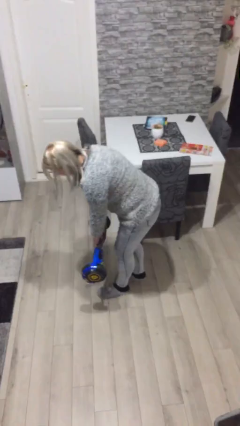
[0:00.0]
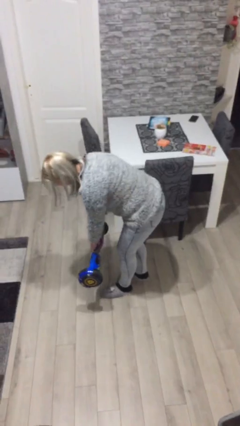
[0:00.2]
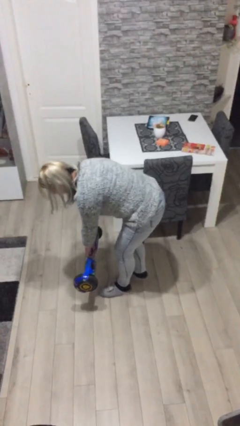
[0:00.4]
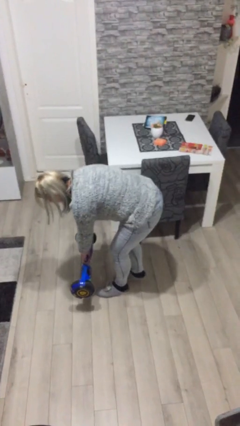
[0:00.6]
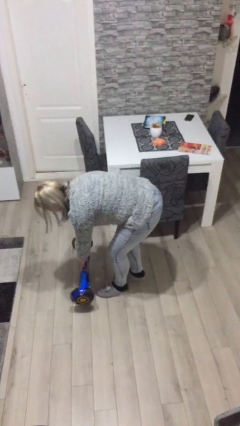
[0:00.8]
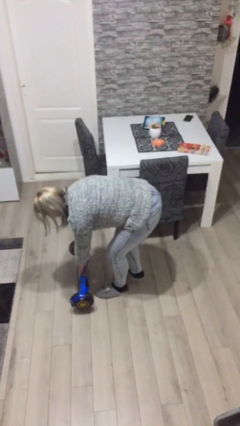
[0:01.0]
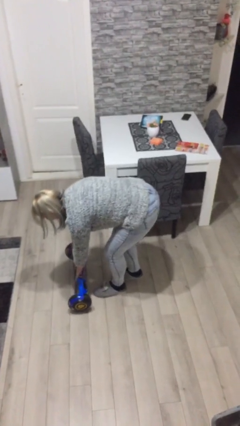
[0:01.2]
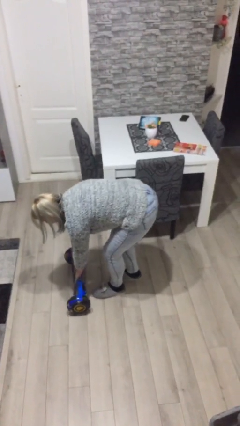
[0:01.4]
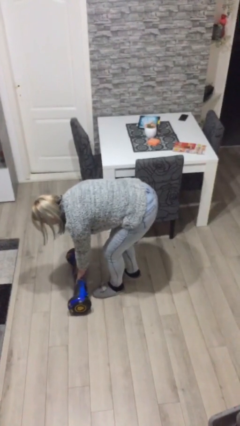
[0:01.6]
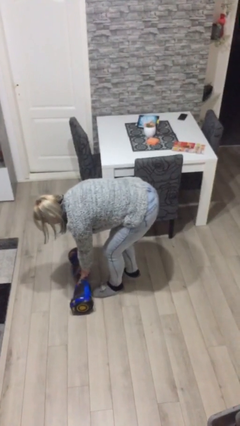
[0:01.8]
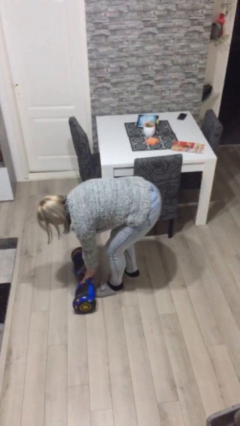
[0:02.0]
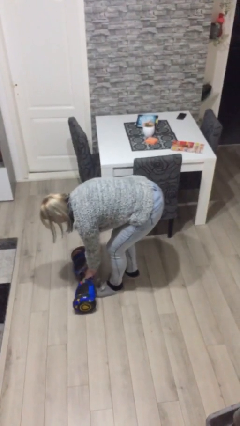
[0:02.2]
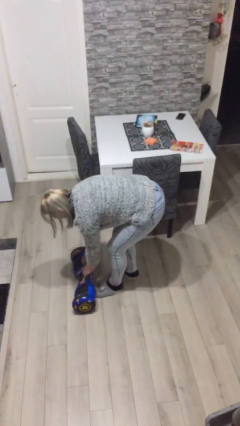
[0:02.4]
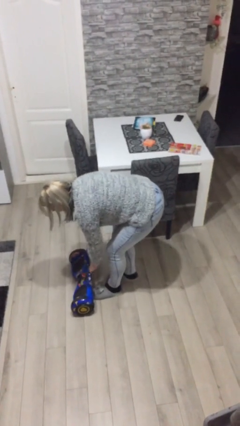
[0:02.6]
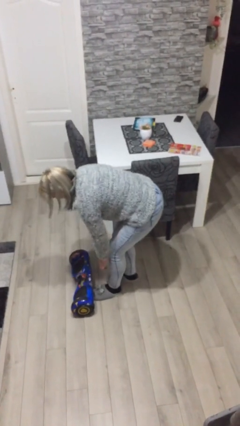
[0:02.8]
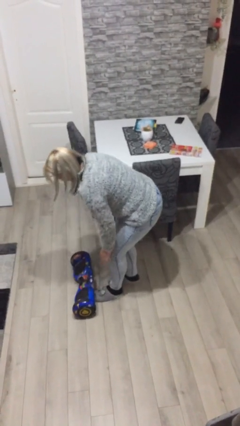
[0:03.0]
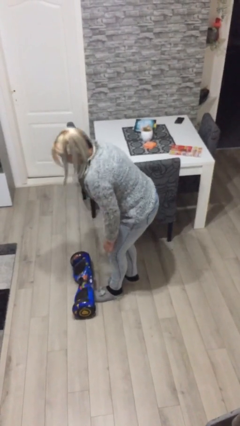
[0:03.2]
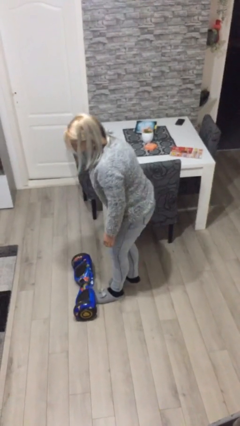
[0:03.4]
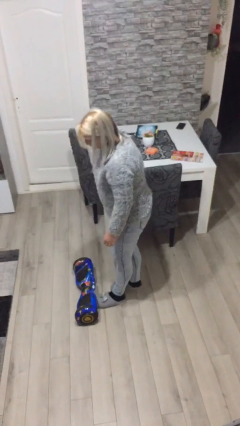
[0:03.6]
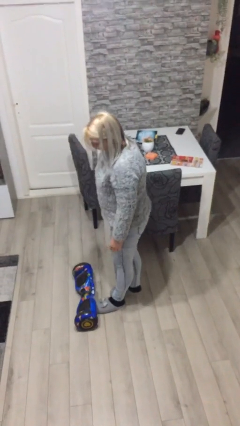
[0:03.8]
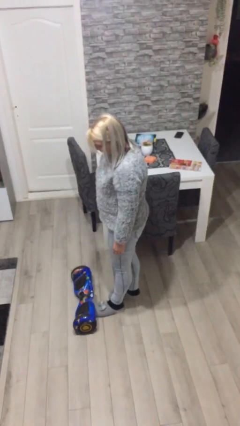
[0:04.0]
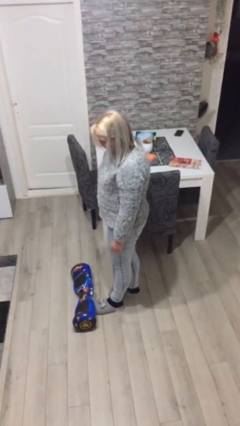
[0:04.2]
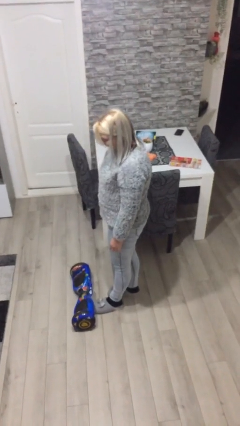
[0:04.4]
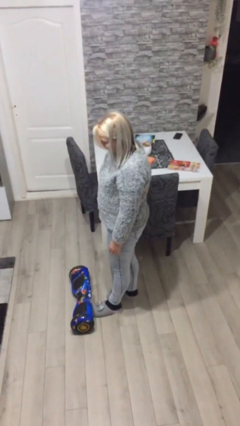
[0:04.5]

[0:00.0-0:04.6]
person puts down object on floor

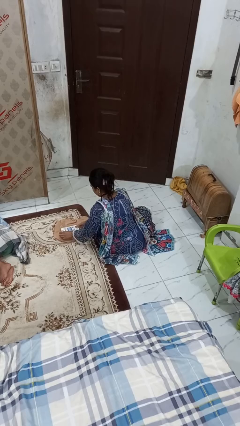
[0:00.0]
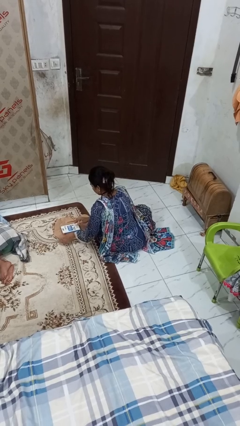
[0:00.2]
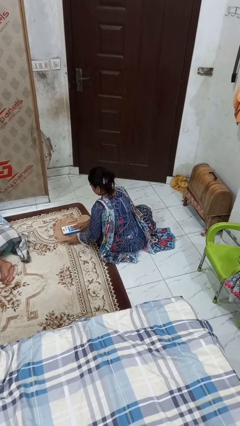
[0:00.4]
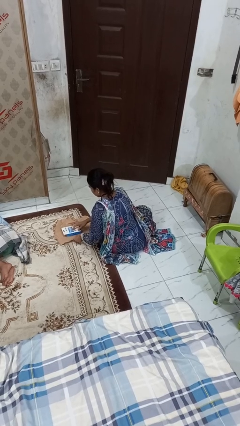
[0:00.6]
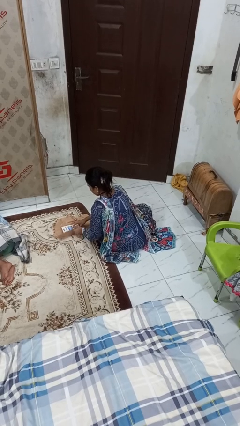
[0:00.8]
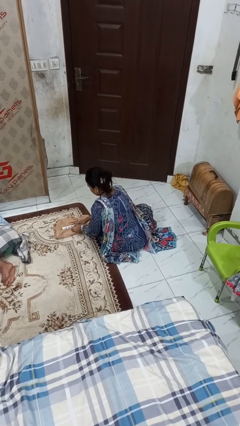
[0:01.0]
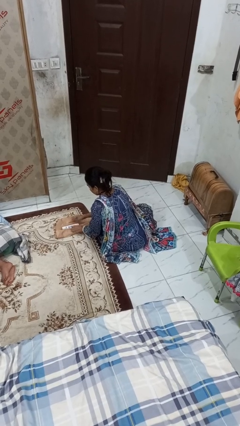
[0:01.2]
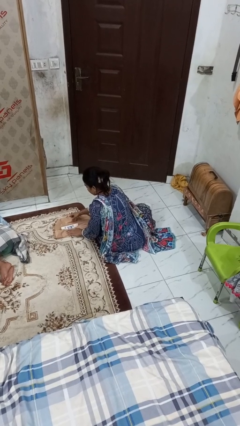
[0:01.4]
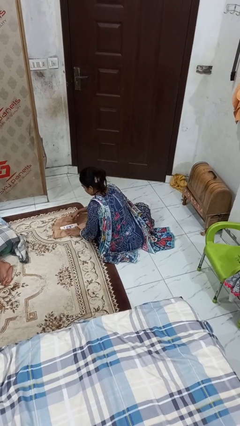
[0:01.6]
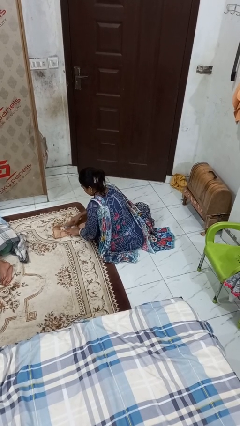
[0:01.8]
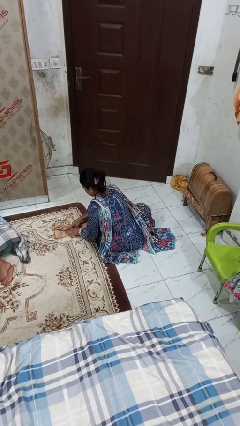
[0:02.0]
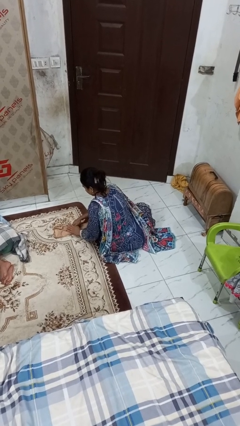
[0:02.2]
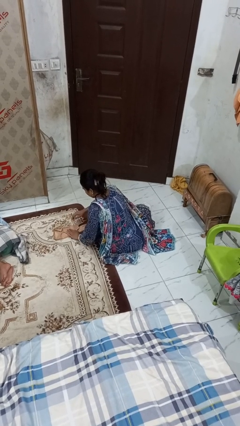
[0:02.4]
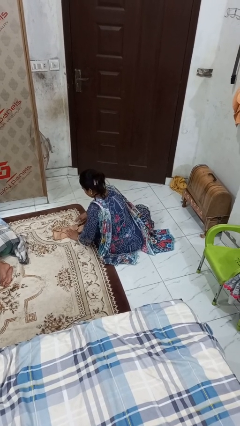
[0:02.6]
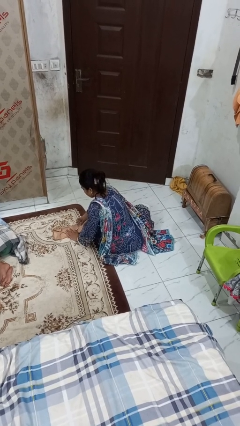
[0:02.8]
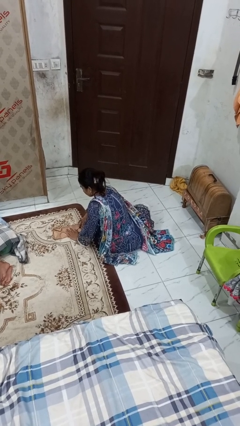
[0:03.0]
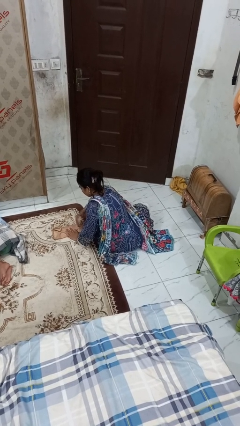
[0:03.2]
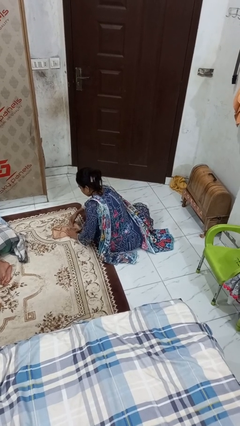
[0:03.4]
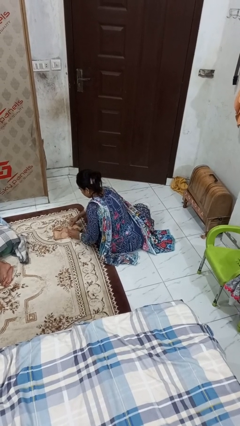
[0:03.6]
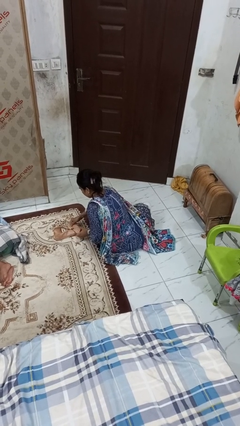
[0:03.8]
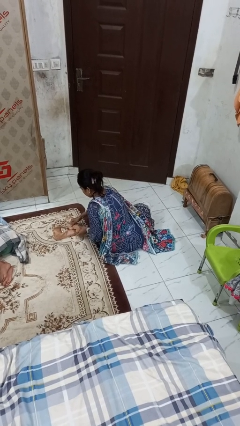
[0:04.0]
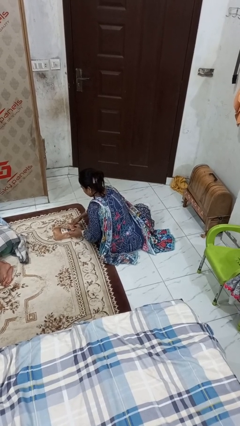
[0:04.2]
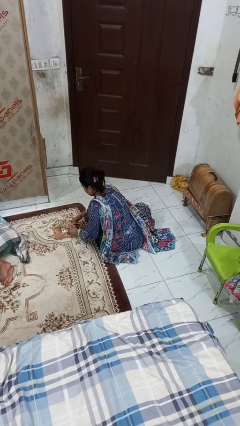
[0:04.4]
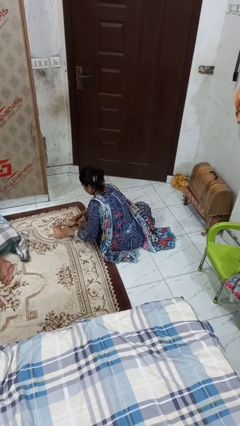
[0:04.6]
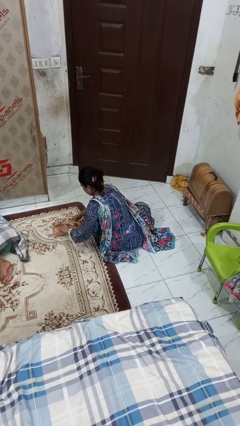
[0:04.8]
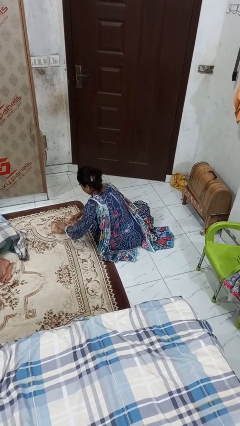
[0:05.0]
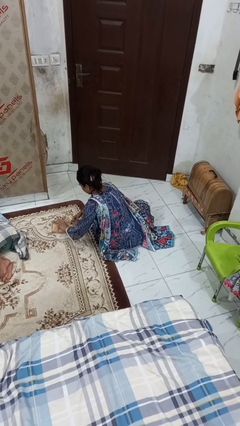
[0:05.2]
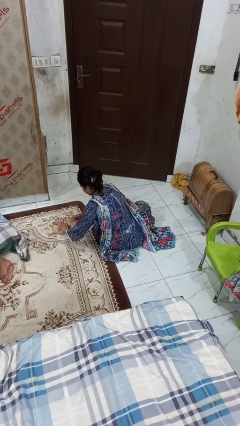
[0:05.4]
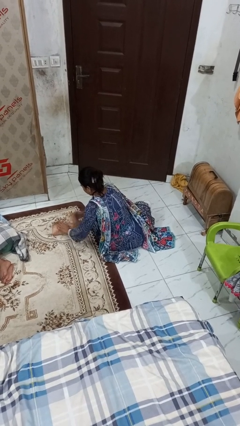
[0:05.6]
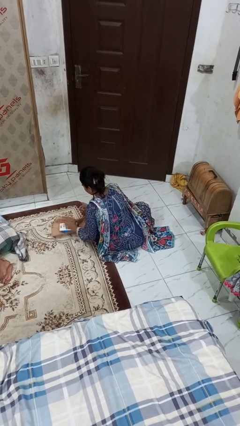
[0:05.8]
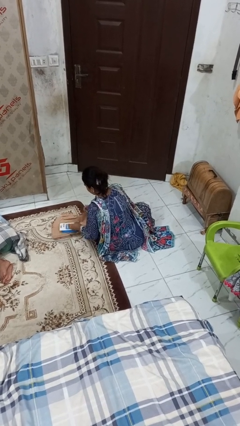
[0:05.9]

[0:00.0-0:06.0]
person wraps box

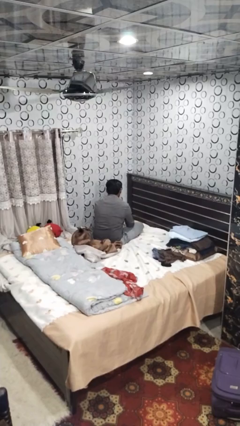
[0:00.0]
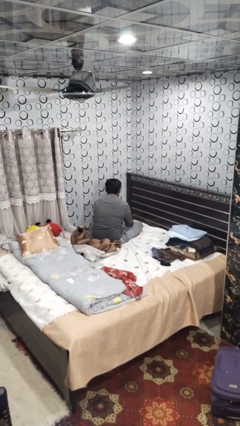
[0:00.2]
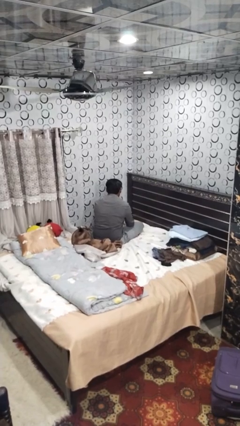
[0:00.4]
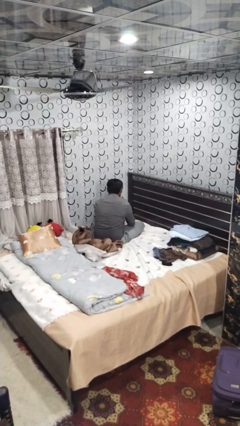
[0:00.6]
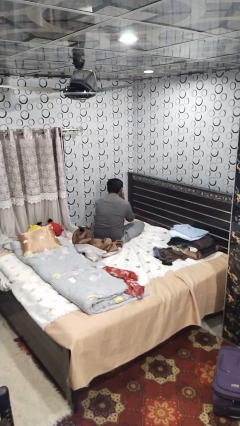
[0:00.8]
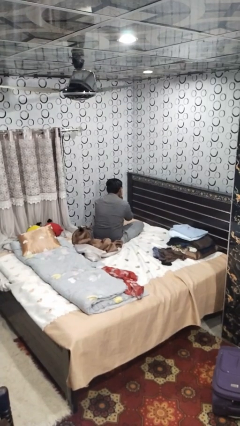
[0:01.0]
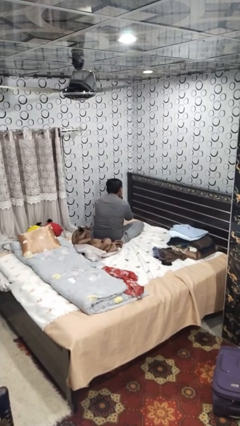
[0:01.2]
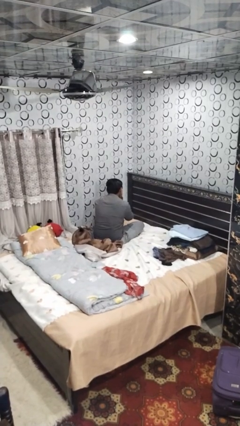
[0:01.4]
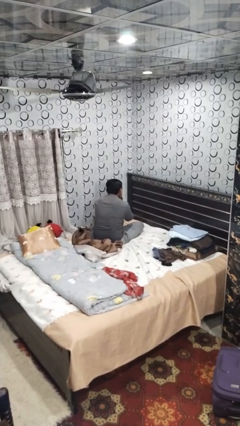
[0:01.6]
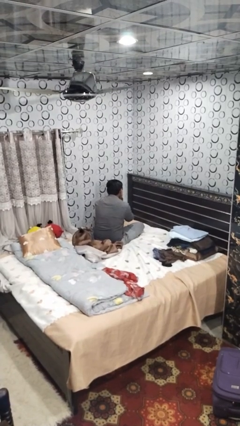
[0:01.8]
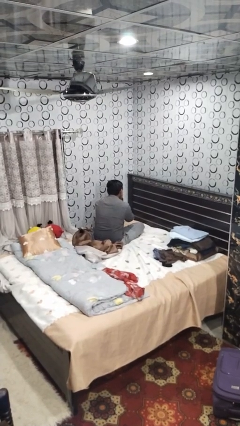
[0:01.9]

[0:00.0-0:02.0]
person covers face with hands

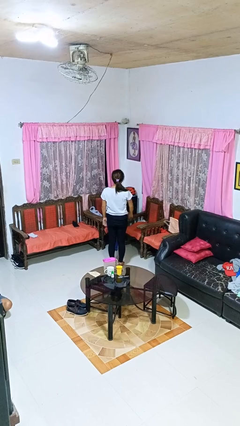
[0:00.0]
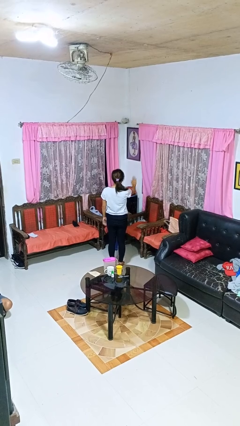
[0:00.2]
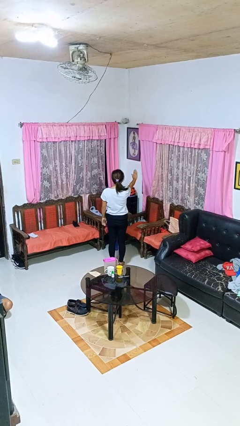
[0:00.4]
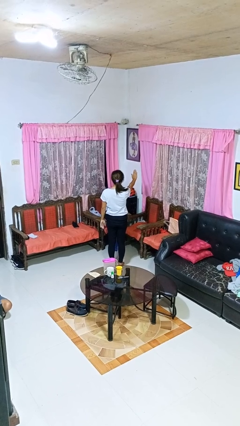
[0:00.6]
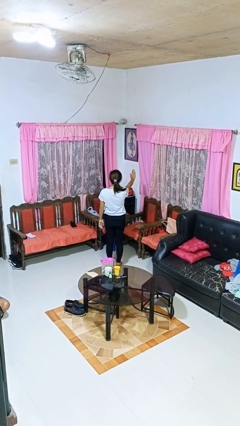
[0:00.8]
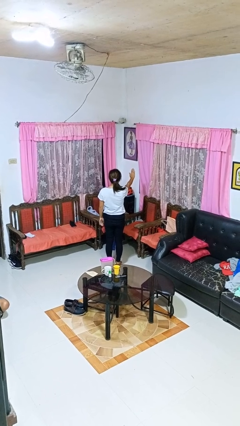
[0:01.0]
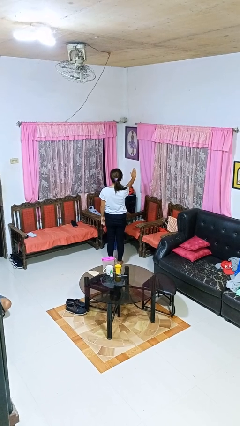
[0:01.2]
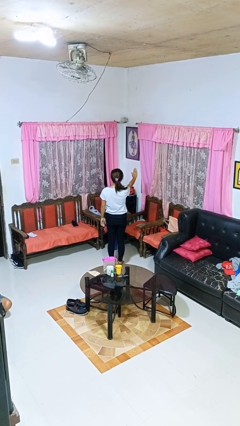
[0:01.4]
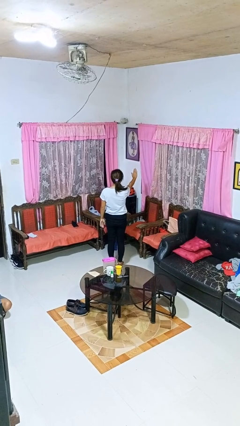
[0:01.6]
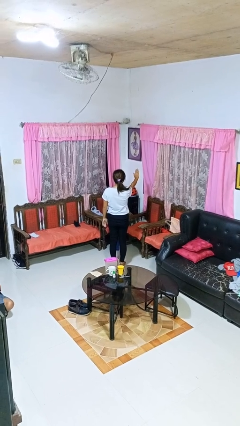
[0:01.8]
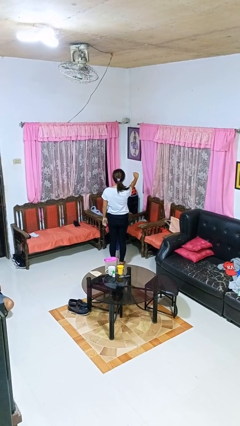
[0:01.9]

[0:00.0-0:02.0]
person gestures stop

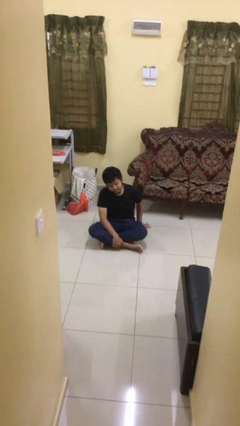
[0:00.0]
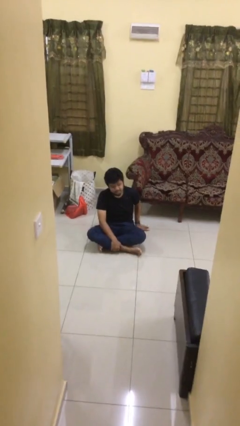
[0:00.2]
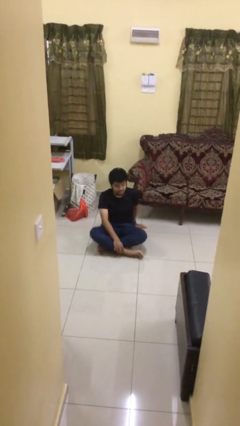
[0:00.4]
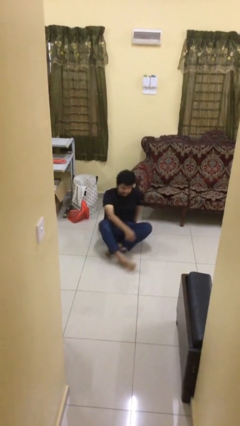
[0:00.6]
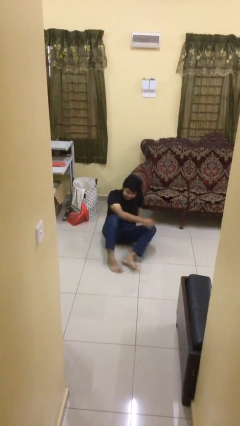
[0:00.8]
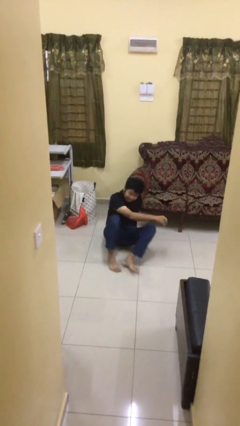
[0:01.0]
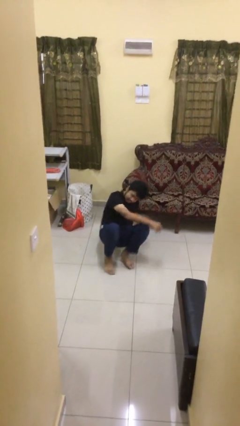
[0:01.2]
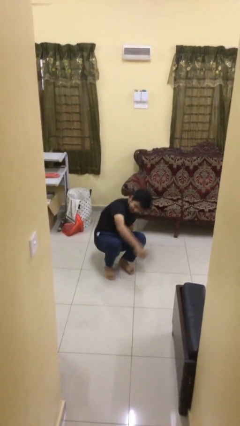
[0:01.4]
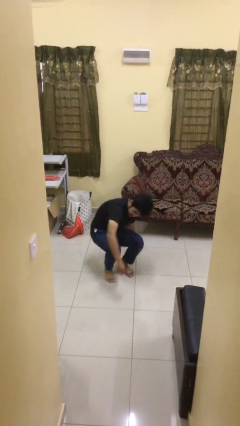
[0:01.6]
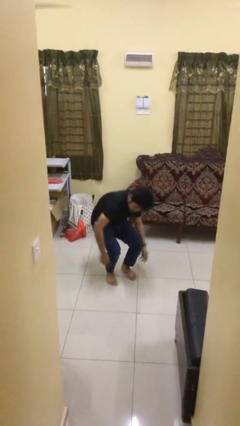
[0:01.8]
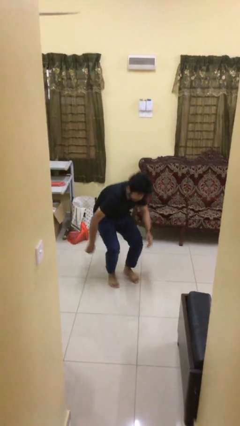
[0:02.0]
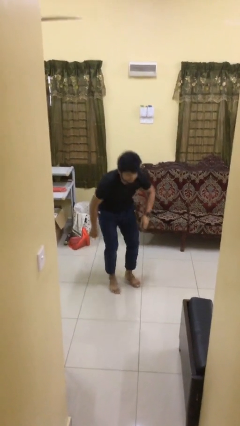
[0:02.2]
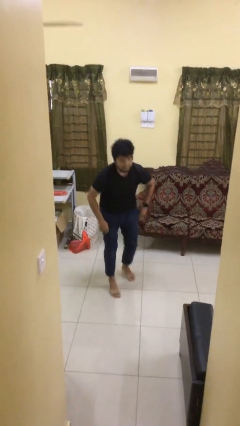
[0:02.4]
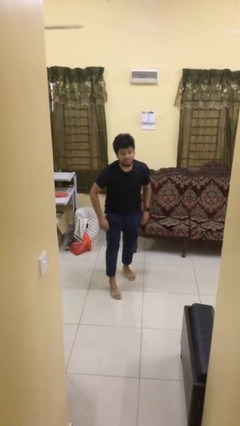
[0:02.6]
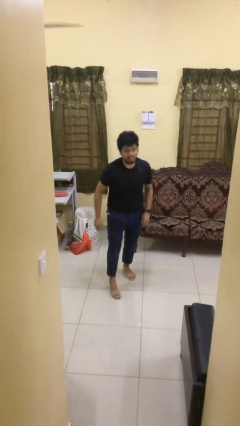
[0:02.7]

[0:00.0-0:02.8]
person stands up from floor

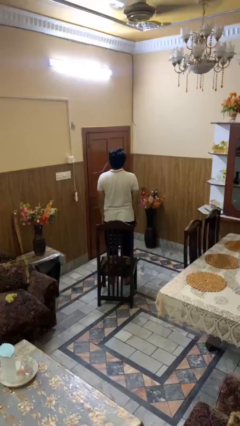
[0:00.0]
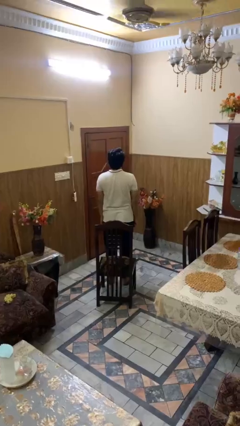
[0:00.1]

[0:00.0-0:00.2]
person sits down
